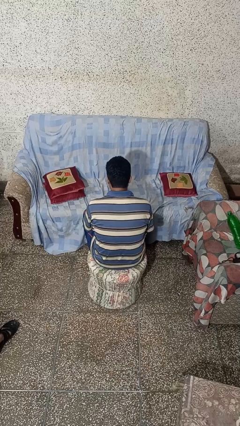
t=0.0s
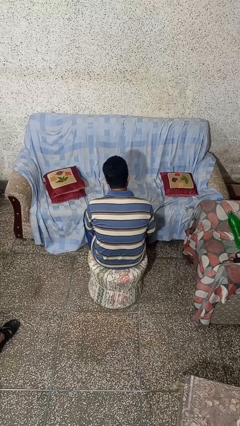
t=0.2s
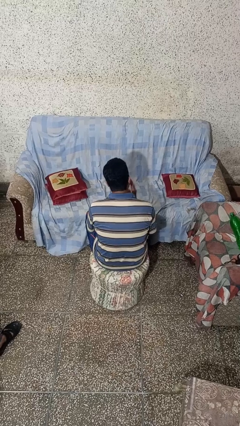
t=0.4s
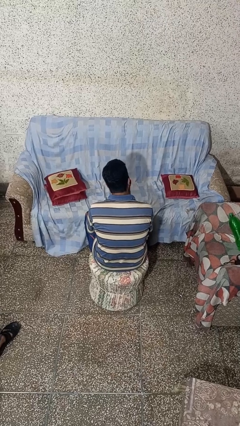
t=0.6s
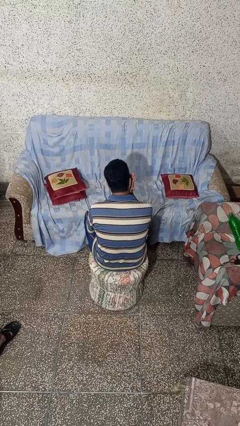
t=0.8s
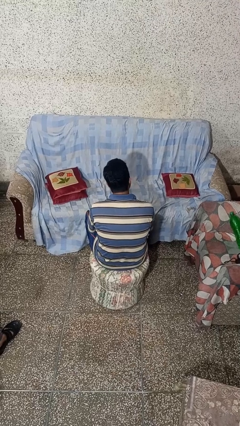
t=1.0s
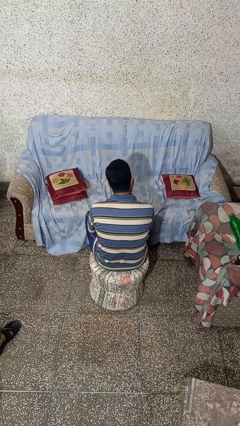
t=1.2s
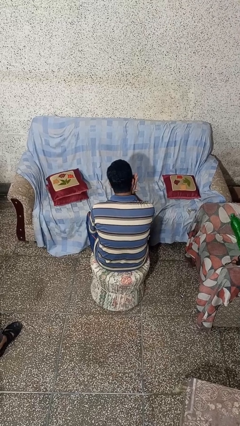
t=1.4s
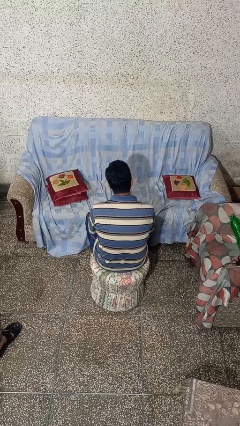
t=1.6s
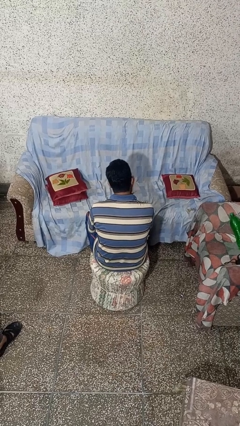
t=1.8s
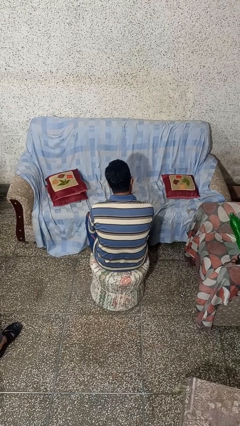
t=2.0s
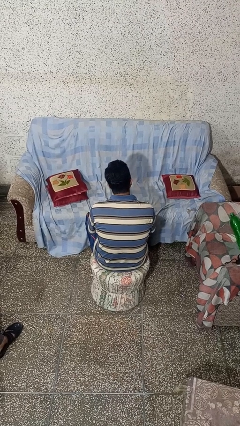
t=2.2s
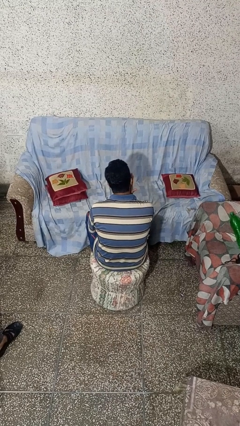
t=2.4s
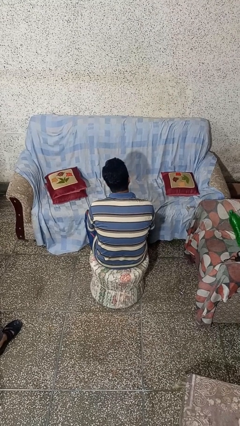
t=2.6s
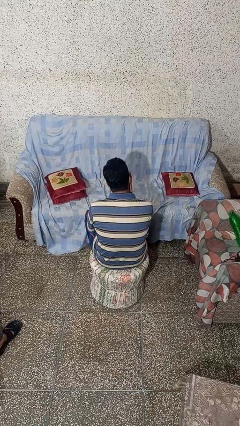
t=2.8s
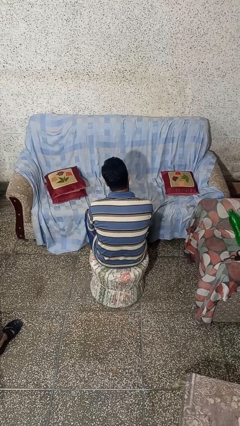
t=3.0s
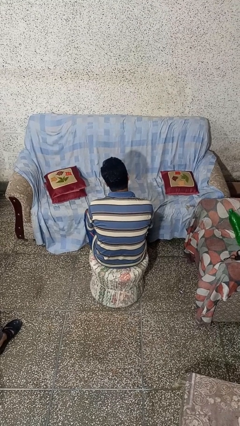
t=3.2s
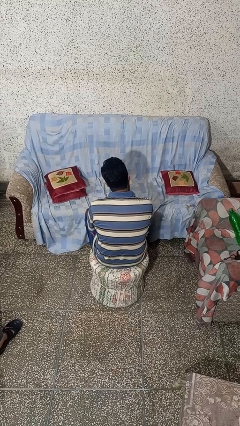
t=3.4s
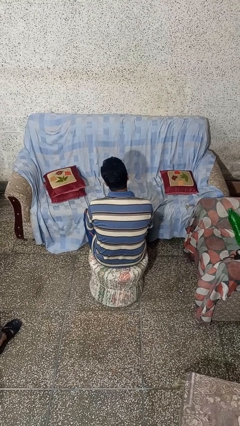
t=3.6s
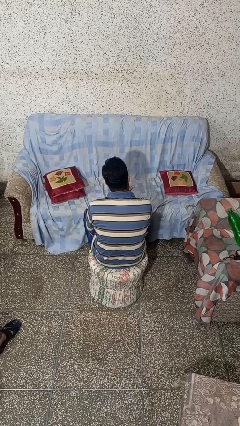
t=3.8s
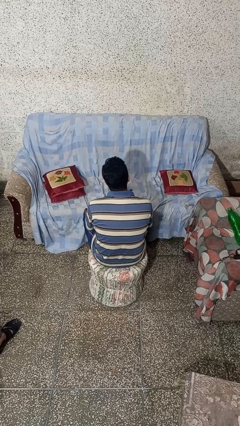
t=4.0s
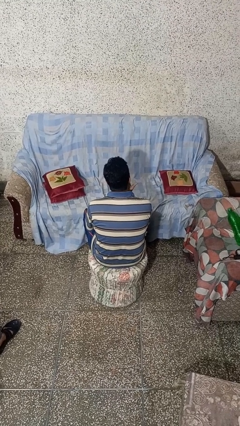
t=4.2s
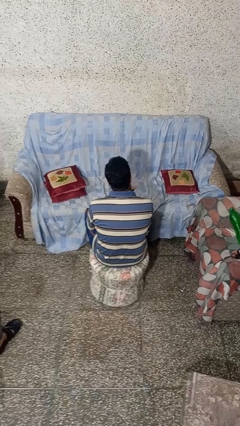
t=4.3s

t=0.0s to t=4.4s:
person strokes chin

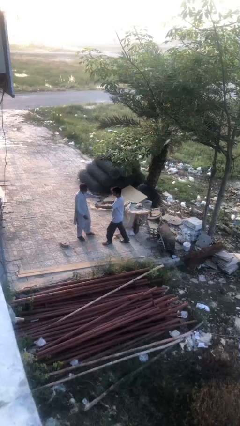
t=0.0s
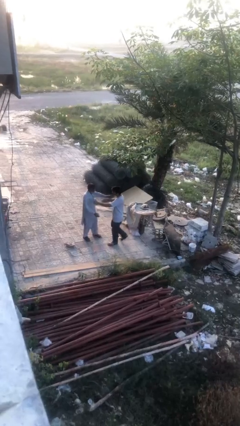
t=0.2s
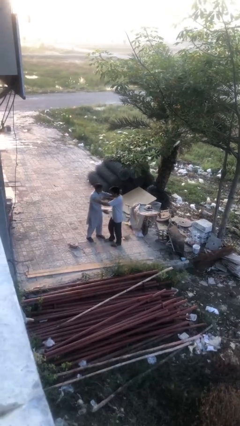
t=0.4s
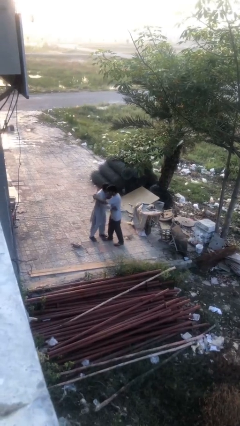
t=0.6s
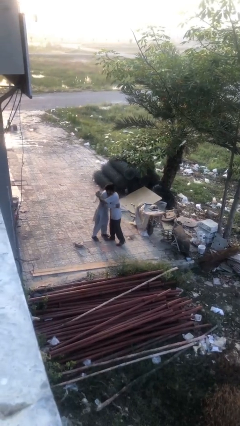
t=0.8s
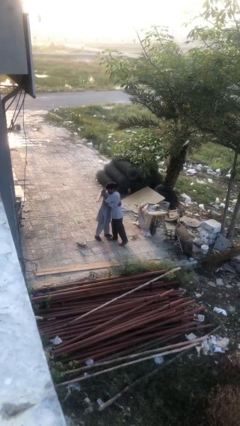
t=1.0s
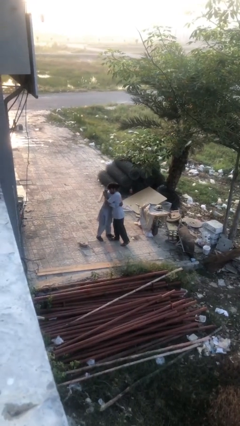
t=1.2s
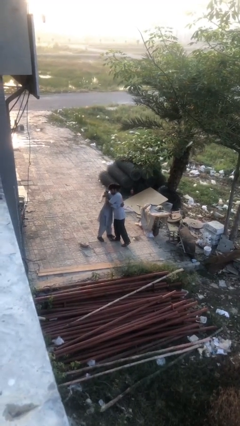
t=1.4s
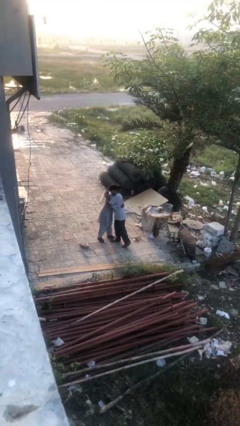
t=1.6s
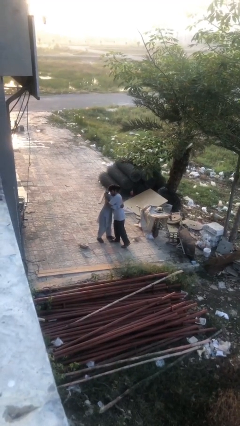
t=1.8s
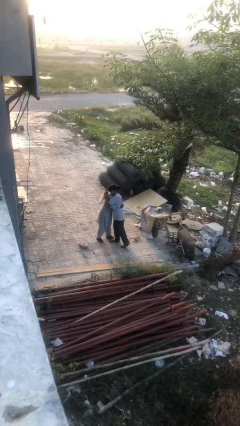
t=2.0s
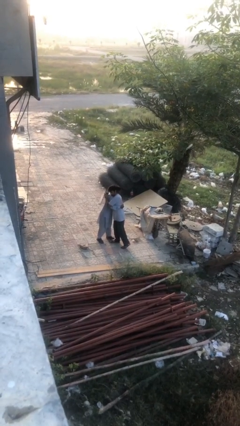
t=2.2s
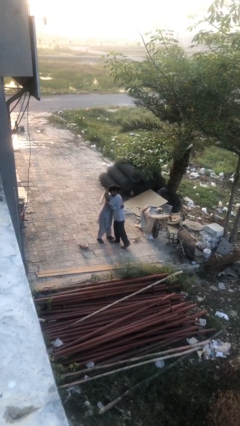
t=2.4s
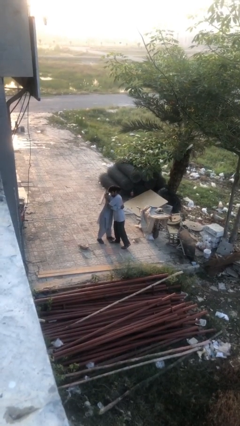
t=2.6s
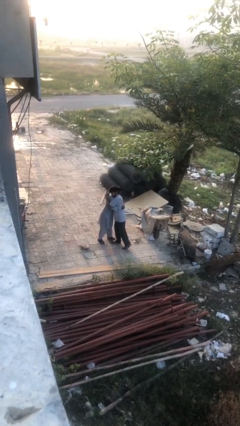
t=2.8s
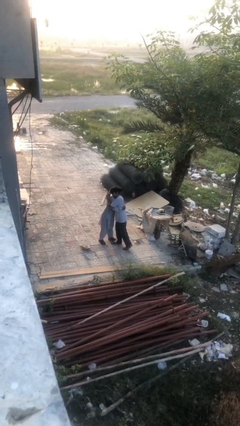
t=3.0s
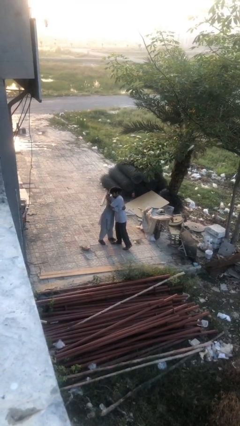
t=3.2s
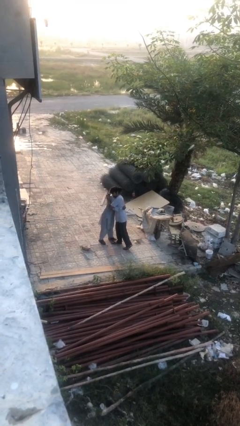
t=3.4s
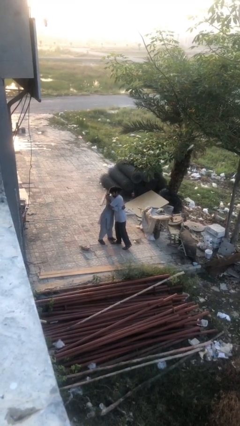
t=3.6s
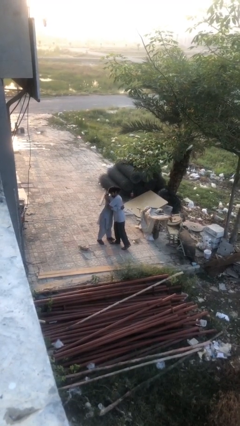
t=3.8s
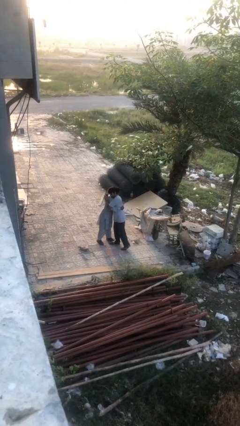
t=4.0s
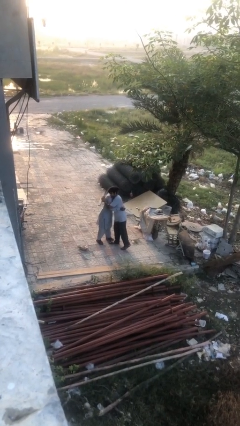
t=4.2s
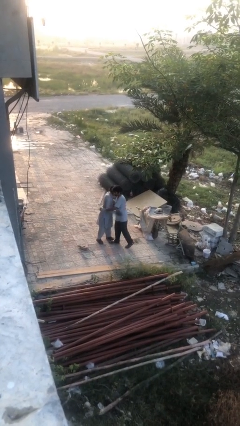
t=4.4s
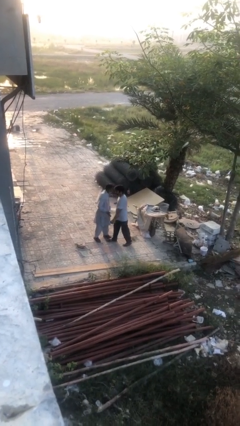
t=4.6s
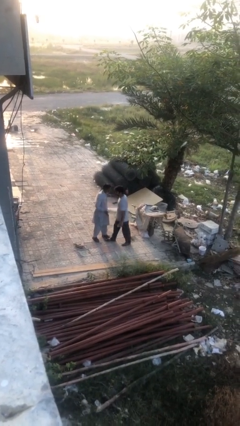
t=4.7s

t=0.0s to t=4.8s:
person embraces person

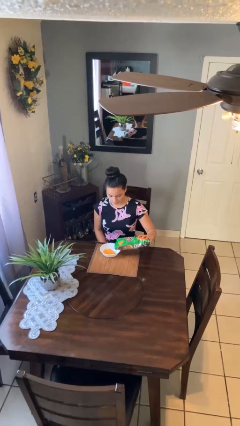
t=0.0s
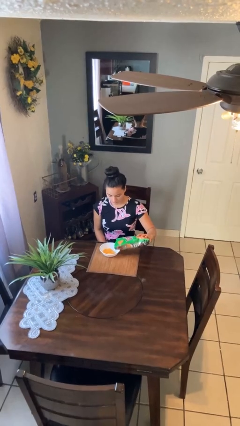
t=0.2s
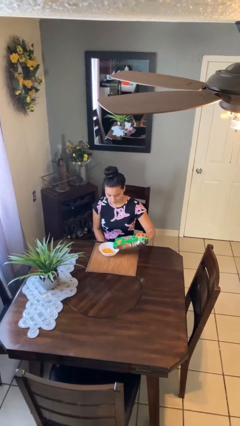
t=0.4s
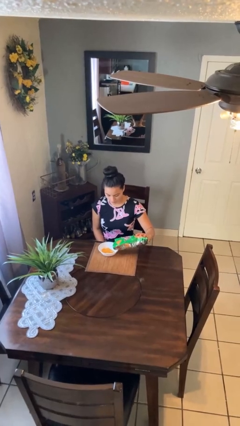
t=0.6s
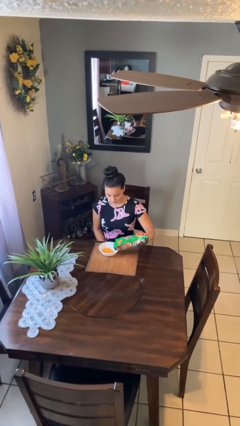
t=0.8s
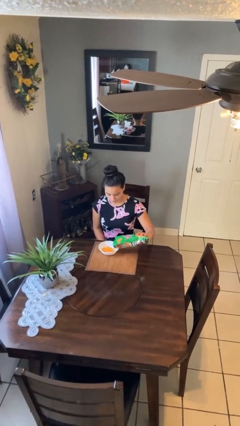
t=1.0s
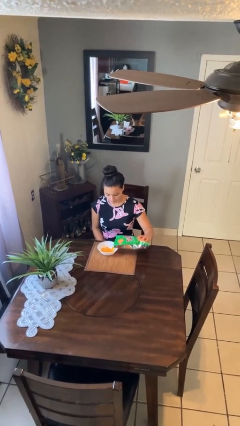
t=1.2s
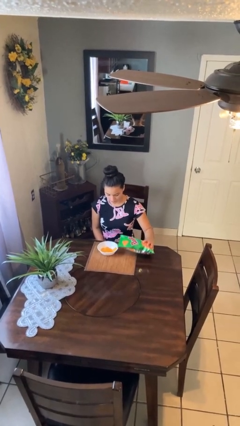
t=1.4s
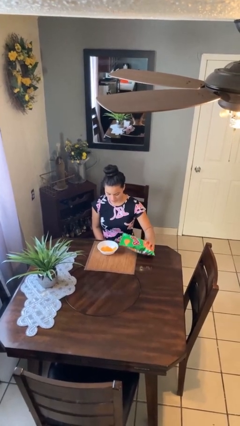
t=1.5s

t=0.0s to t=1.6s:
person pours into bowl

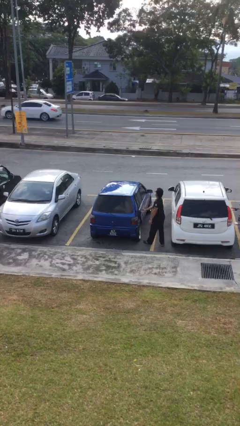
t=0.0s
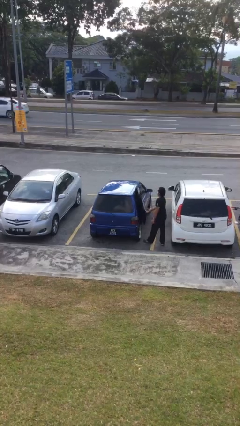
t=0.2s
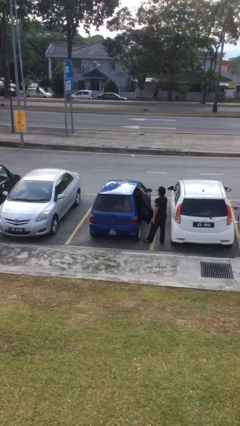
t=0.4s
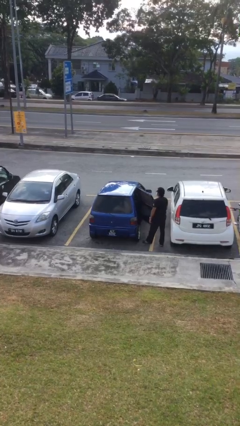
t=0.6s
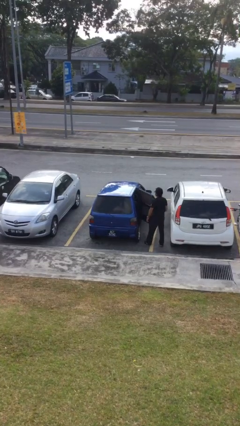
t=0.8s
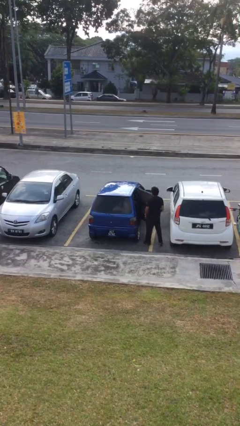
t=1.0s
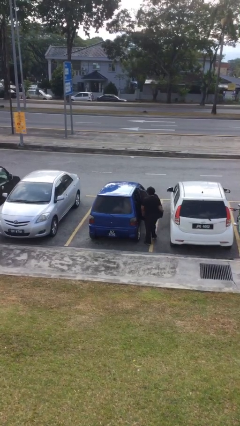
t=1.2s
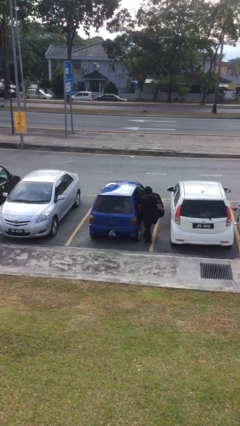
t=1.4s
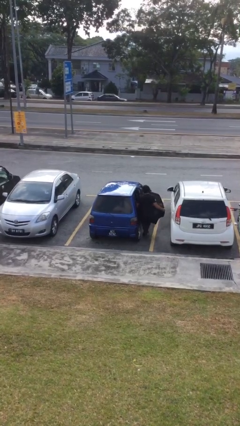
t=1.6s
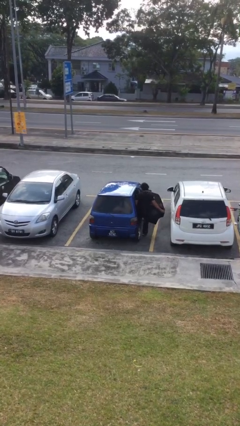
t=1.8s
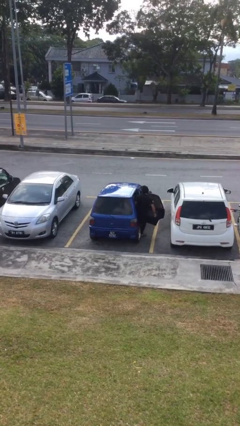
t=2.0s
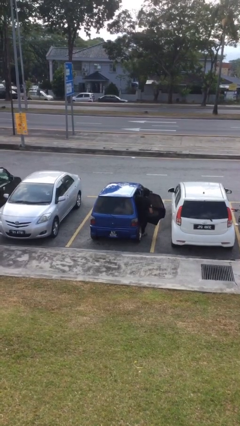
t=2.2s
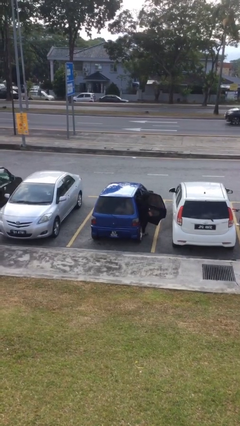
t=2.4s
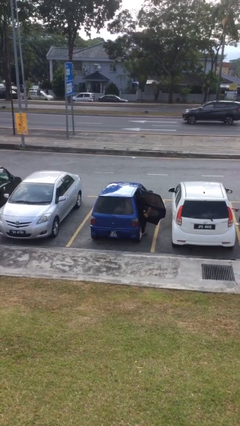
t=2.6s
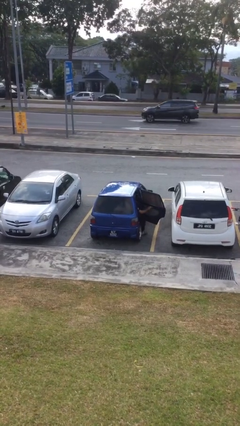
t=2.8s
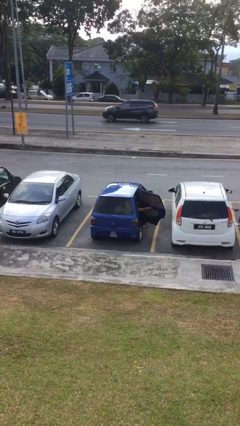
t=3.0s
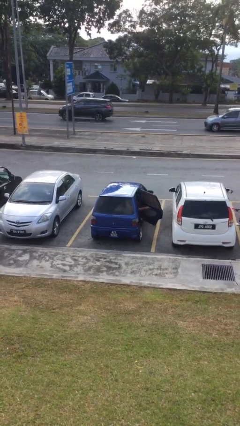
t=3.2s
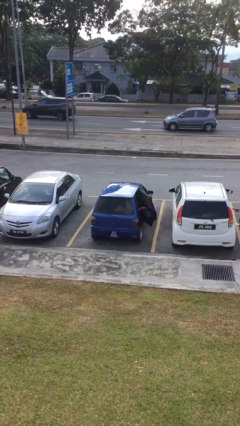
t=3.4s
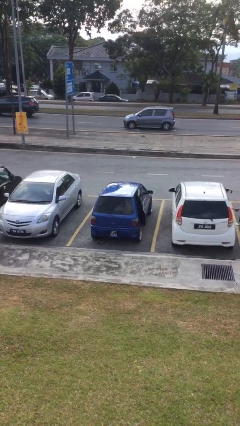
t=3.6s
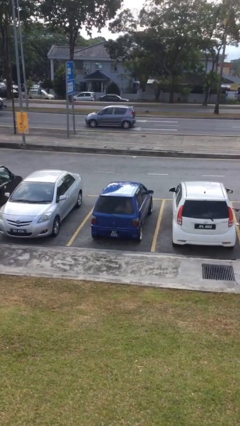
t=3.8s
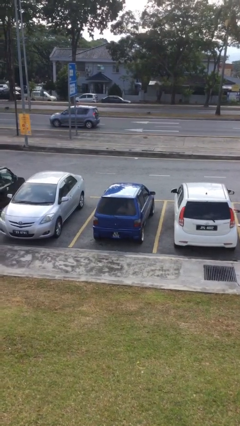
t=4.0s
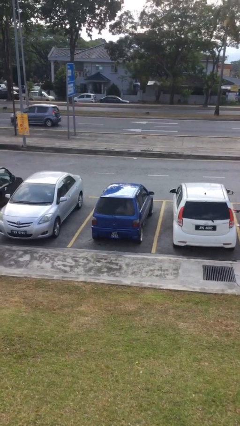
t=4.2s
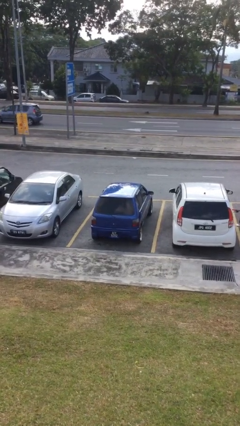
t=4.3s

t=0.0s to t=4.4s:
car picks up person

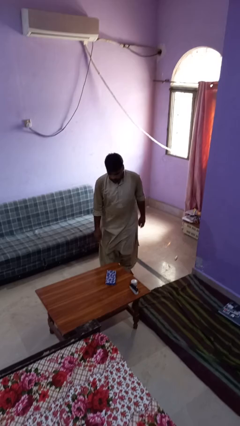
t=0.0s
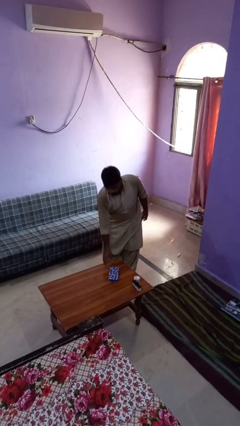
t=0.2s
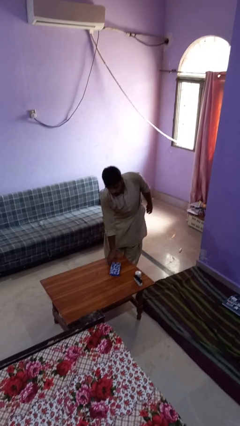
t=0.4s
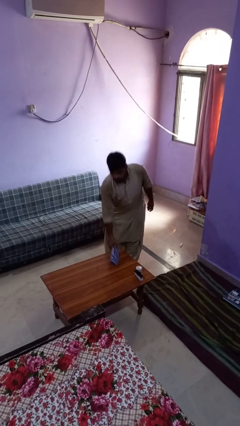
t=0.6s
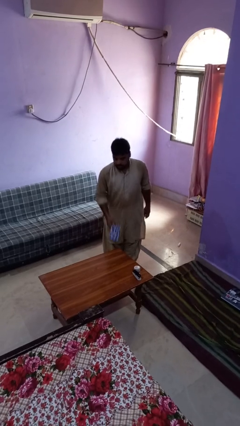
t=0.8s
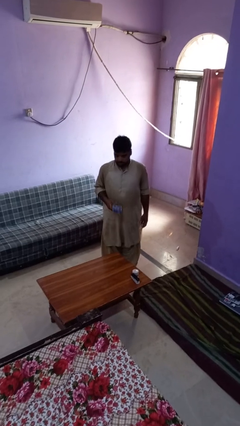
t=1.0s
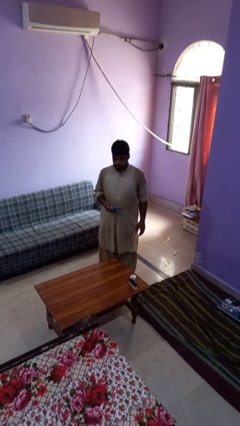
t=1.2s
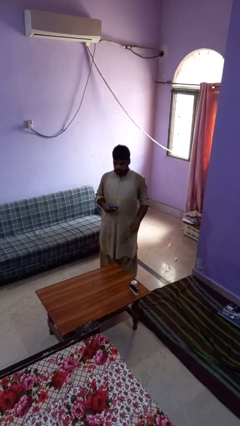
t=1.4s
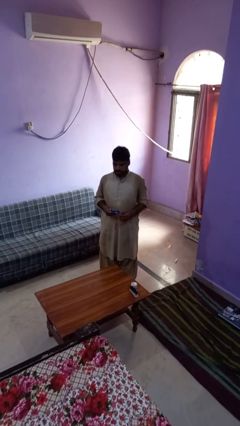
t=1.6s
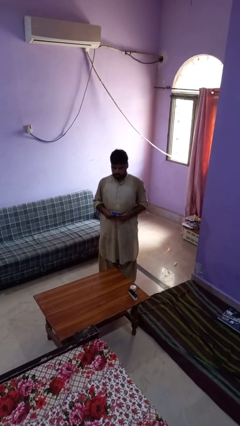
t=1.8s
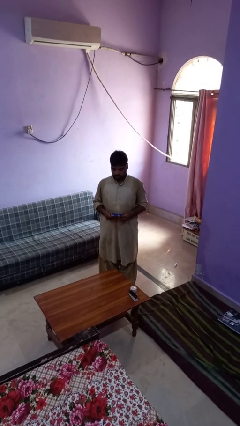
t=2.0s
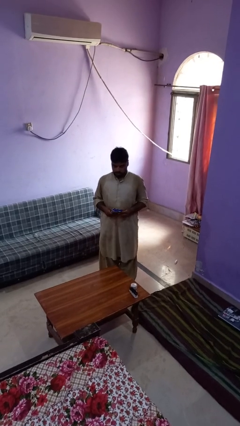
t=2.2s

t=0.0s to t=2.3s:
person picks up object from table

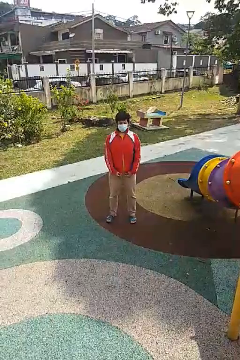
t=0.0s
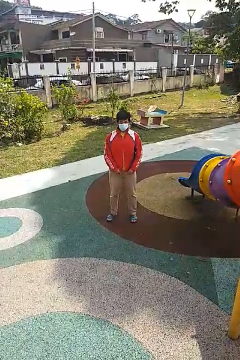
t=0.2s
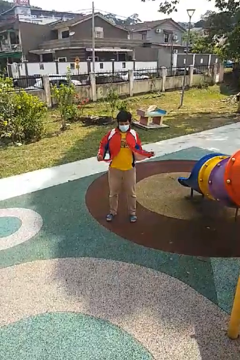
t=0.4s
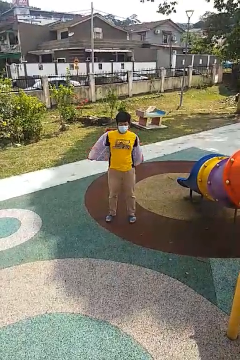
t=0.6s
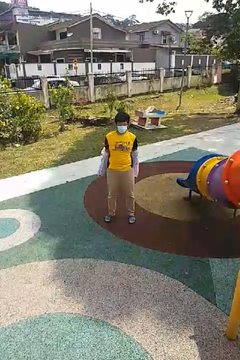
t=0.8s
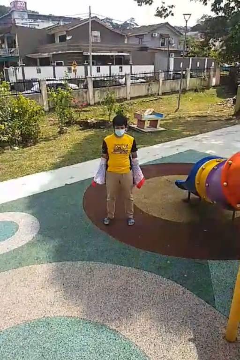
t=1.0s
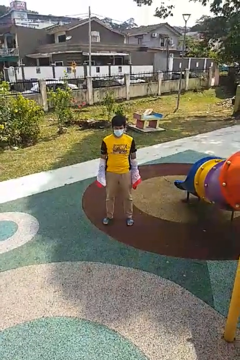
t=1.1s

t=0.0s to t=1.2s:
person takes off jacket
